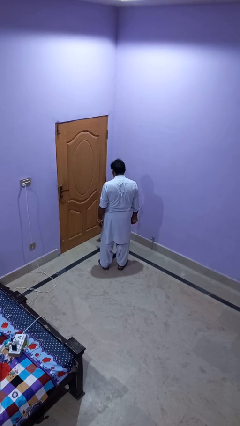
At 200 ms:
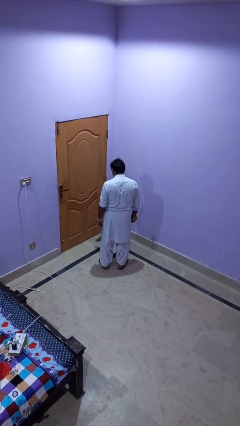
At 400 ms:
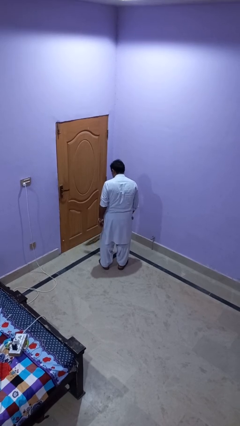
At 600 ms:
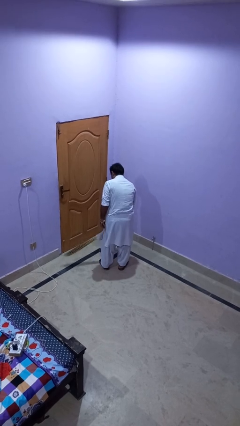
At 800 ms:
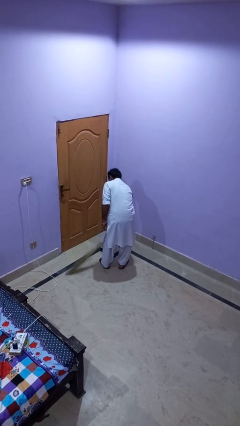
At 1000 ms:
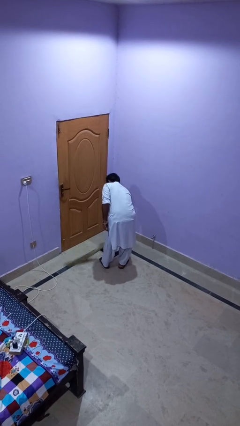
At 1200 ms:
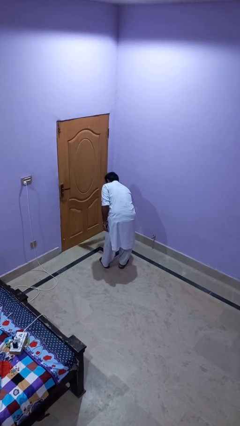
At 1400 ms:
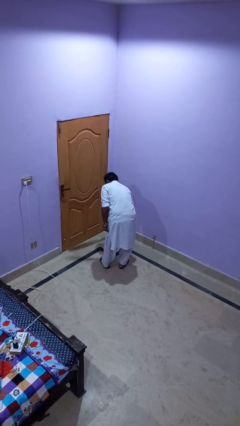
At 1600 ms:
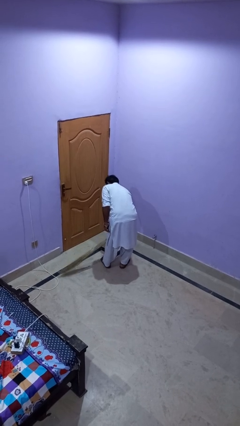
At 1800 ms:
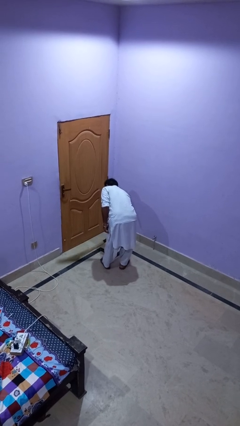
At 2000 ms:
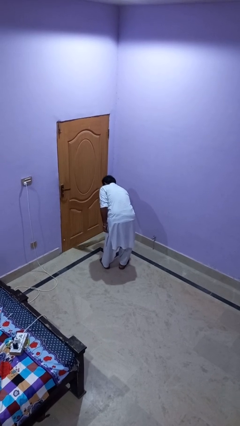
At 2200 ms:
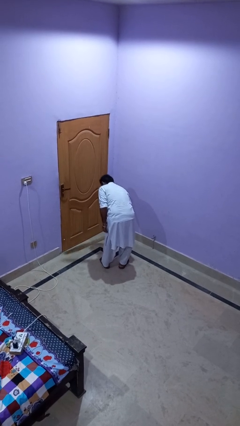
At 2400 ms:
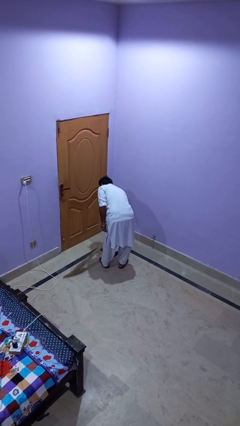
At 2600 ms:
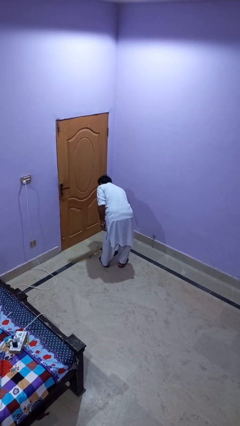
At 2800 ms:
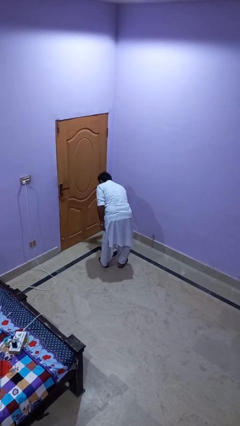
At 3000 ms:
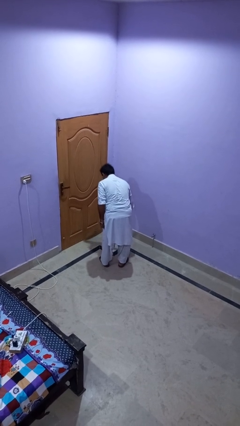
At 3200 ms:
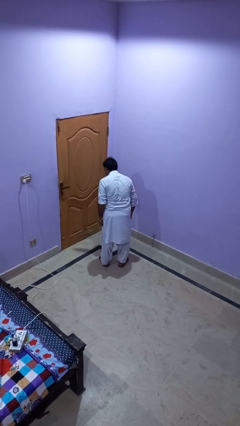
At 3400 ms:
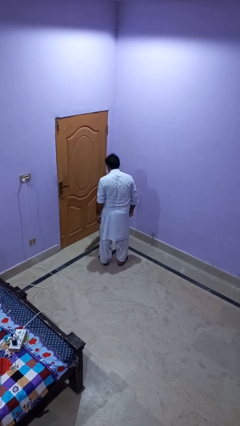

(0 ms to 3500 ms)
person sweeps floor

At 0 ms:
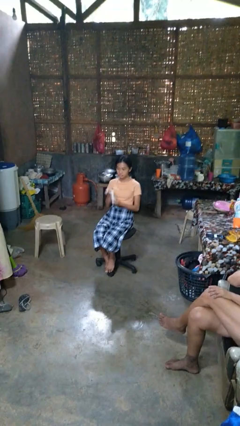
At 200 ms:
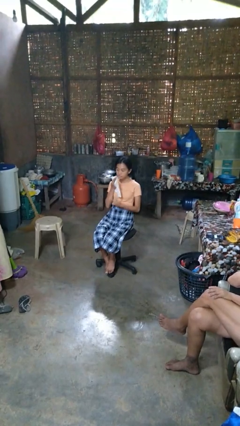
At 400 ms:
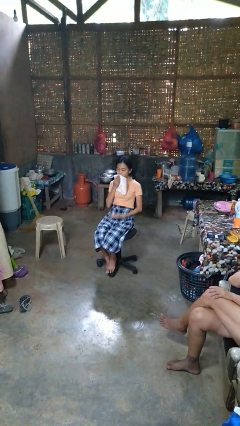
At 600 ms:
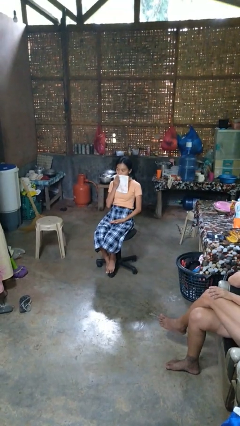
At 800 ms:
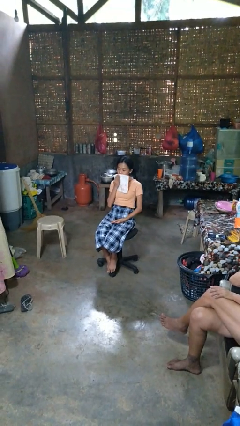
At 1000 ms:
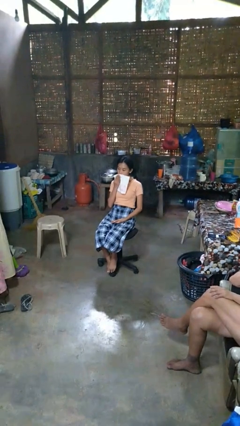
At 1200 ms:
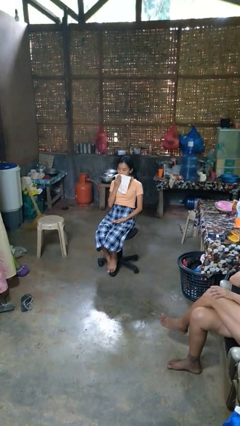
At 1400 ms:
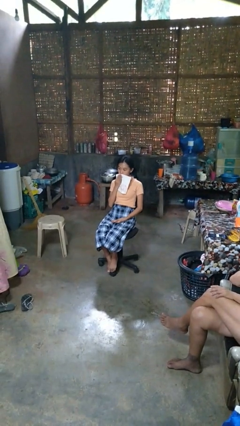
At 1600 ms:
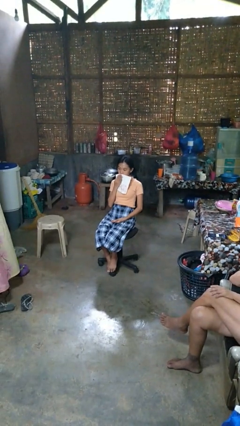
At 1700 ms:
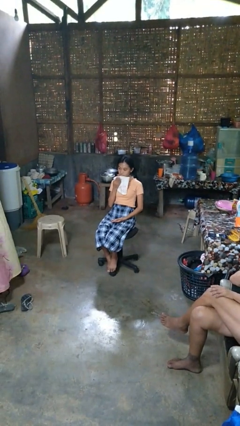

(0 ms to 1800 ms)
person wipes mouth with napkin

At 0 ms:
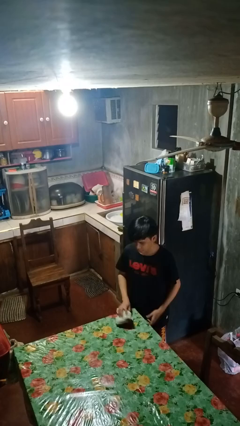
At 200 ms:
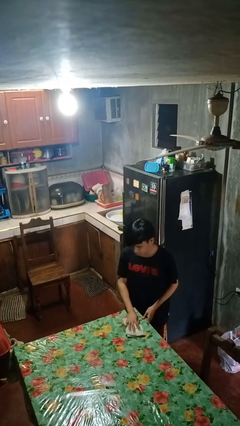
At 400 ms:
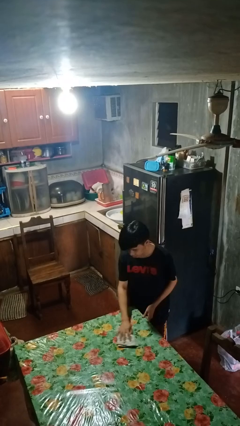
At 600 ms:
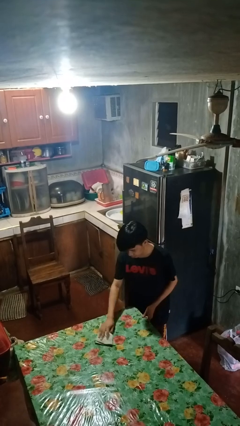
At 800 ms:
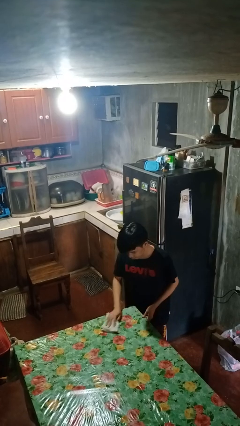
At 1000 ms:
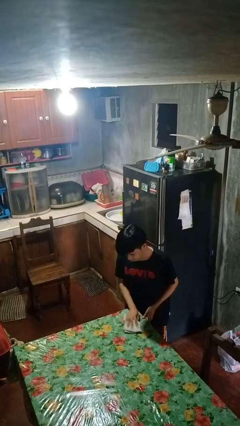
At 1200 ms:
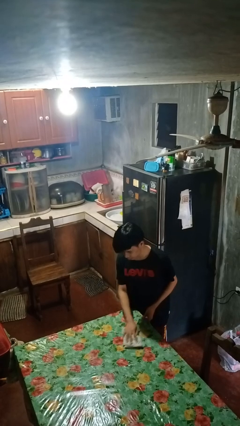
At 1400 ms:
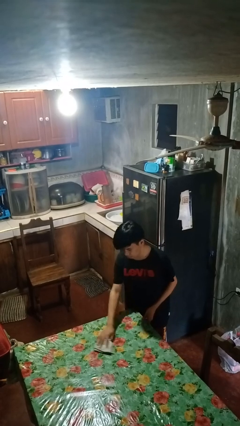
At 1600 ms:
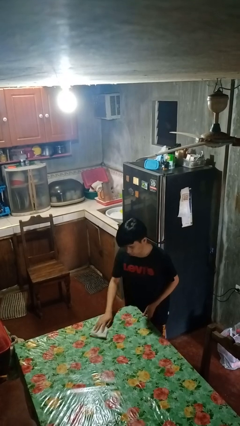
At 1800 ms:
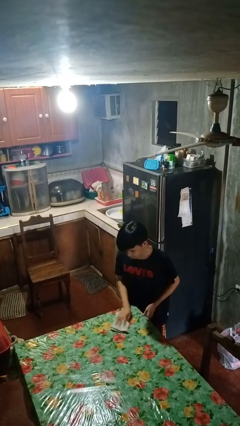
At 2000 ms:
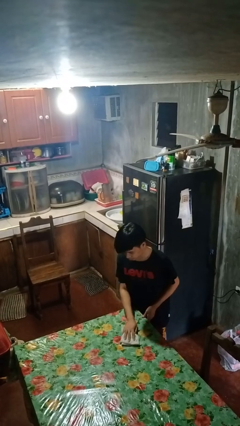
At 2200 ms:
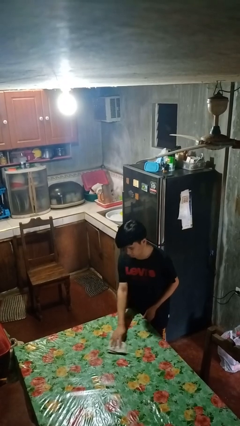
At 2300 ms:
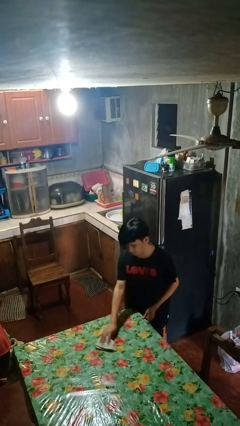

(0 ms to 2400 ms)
person cleans table with rag

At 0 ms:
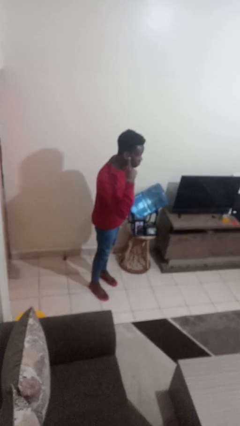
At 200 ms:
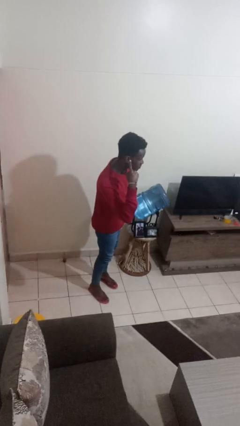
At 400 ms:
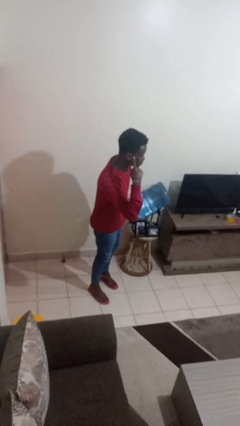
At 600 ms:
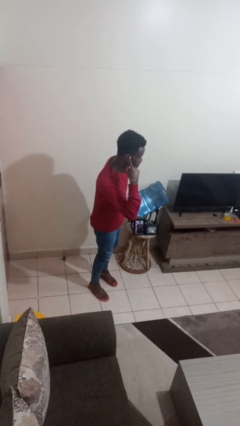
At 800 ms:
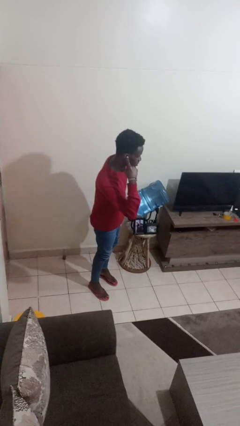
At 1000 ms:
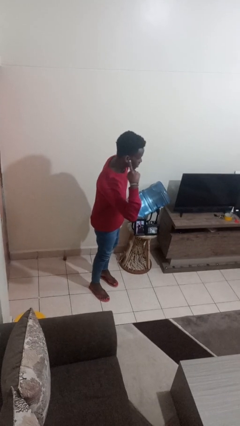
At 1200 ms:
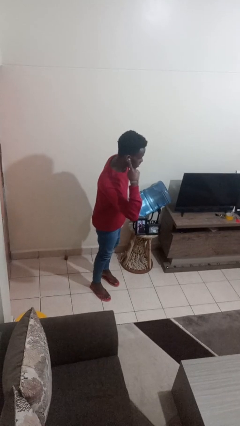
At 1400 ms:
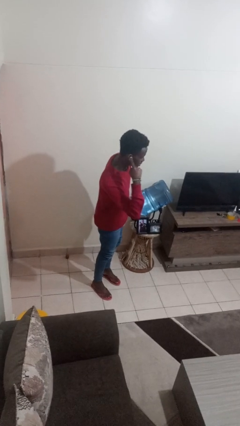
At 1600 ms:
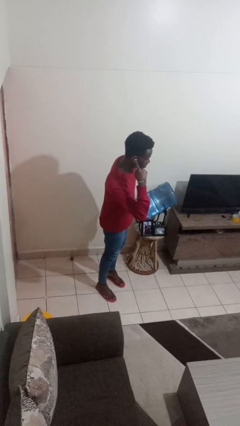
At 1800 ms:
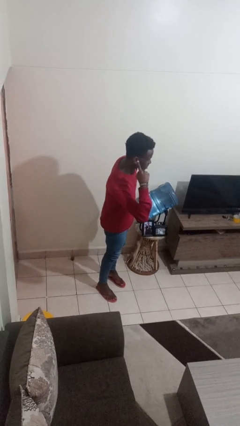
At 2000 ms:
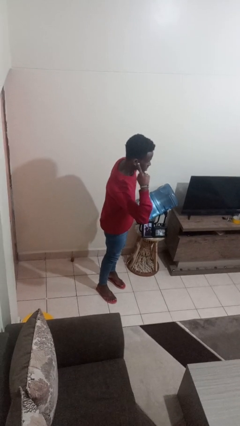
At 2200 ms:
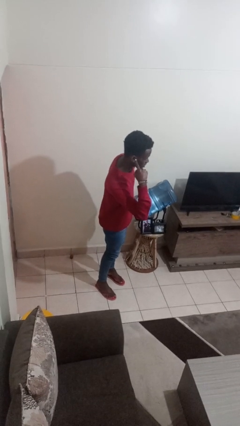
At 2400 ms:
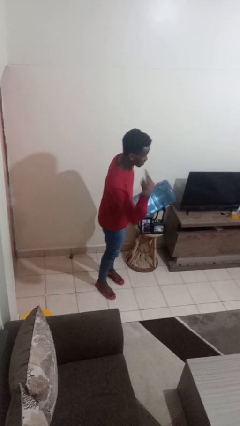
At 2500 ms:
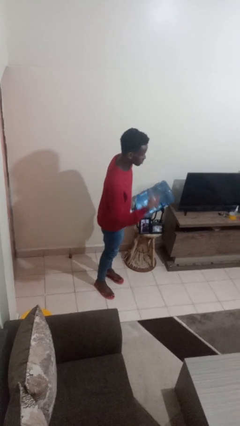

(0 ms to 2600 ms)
person gestures listen closely

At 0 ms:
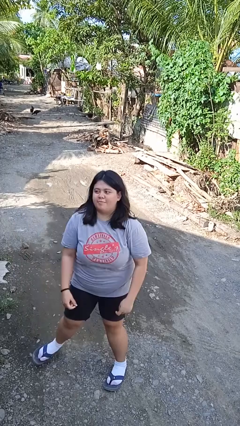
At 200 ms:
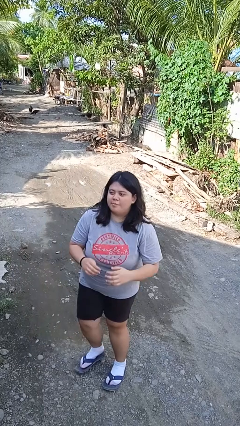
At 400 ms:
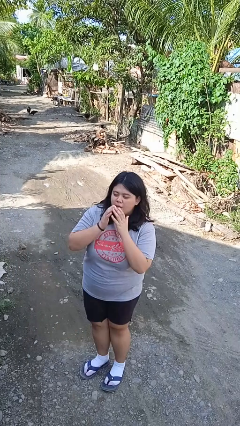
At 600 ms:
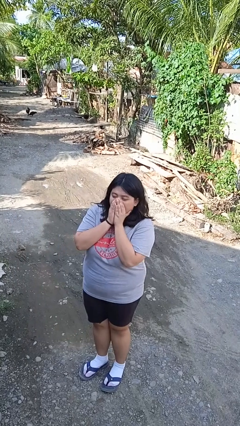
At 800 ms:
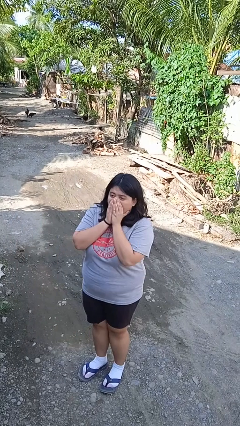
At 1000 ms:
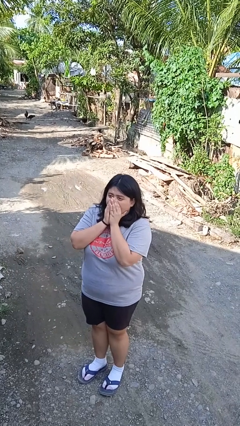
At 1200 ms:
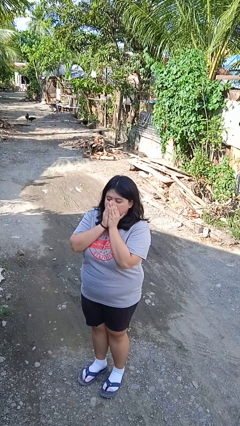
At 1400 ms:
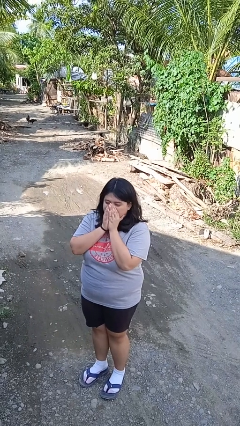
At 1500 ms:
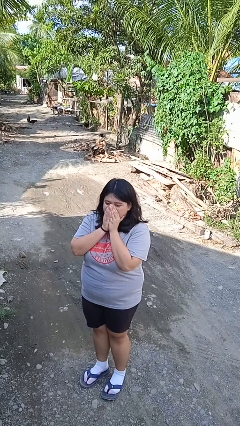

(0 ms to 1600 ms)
person blows into hands

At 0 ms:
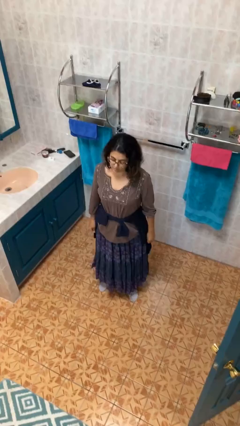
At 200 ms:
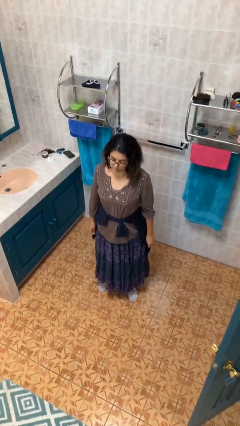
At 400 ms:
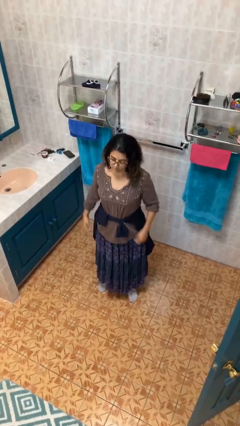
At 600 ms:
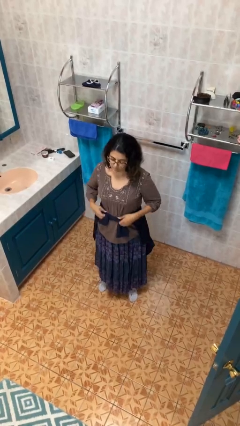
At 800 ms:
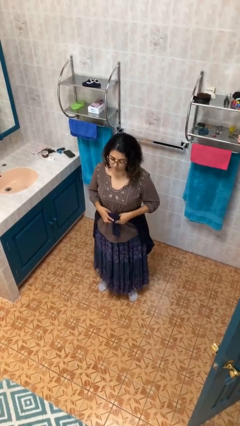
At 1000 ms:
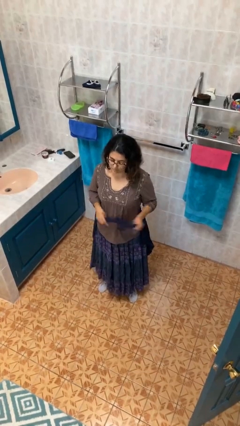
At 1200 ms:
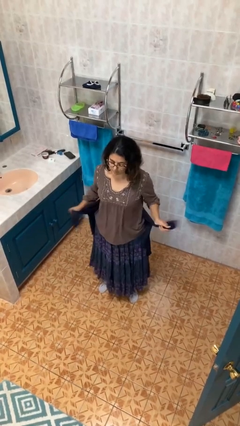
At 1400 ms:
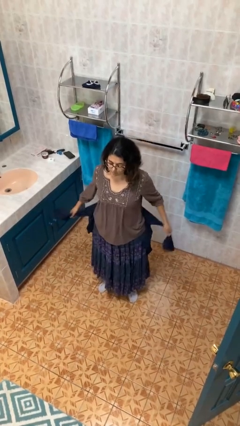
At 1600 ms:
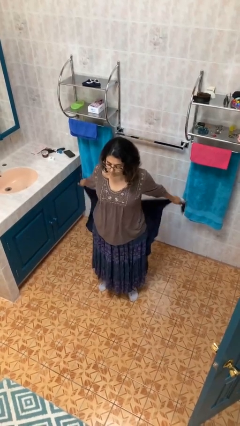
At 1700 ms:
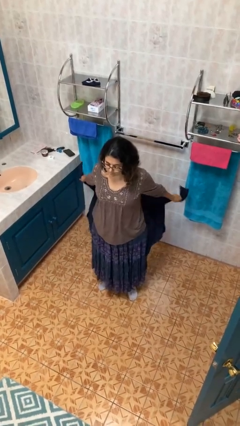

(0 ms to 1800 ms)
person unties jacket around waist

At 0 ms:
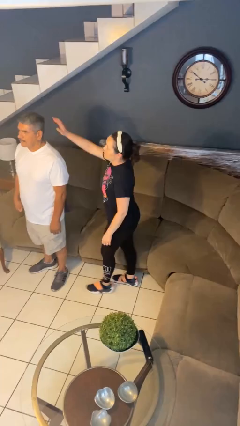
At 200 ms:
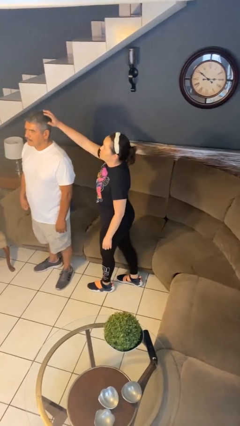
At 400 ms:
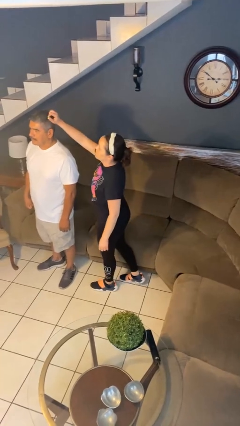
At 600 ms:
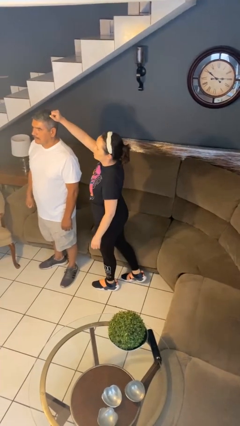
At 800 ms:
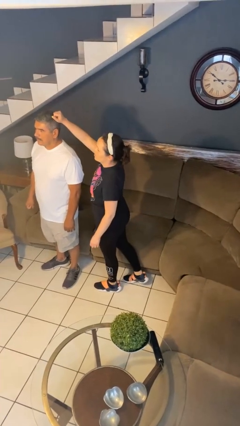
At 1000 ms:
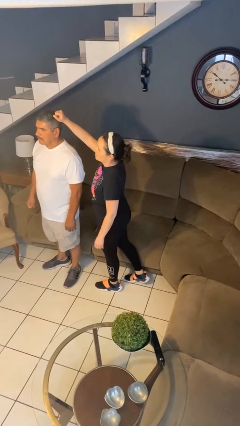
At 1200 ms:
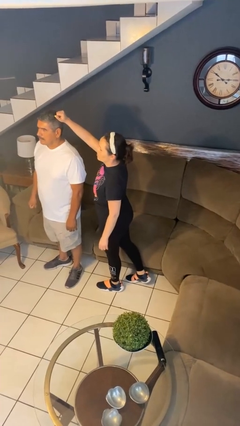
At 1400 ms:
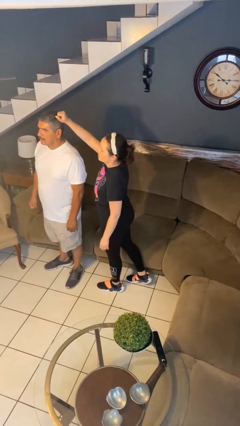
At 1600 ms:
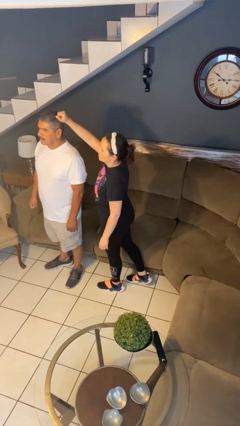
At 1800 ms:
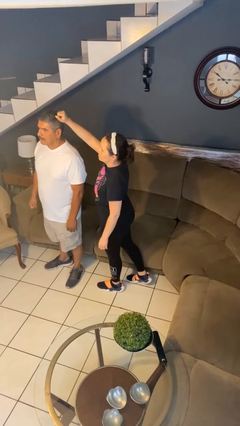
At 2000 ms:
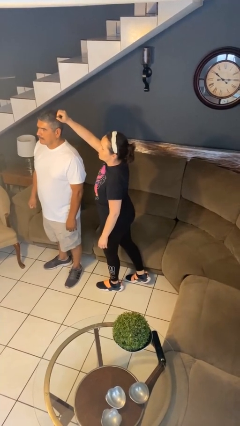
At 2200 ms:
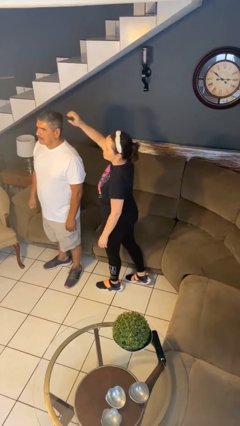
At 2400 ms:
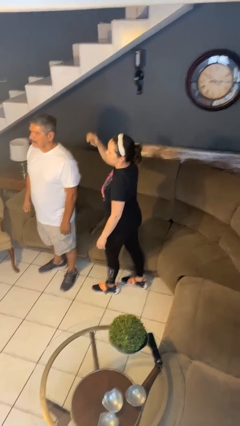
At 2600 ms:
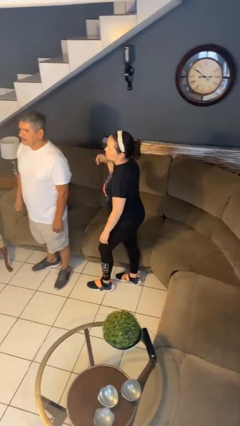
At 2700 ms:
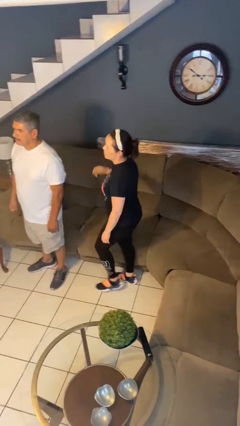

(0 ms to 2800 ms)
person grabs person by hair

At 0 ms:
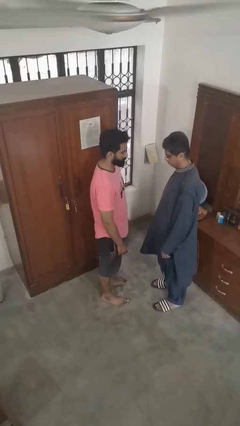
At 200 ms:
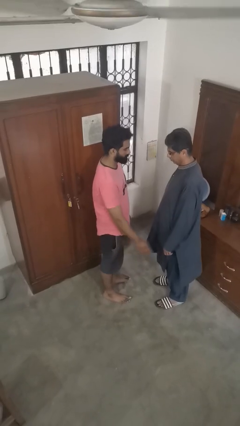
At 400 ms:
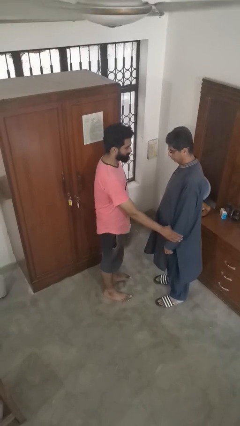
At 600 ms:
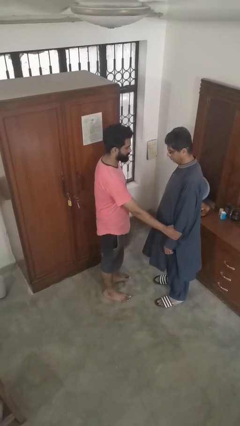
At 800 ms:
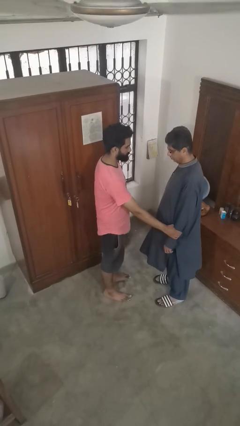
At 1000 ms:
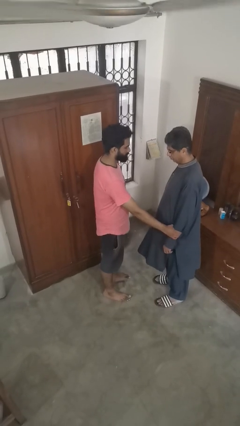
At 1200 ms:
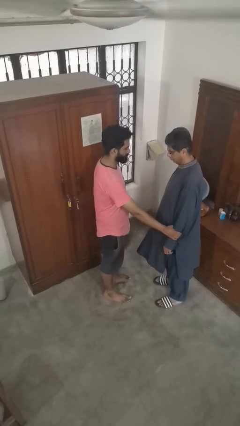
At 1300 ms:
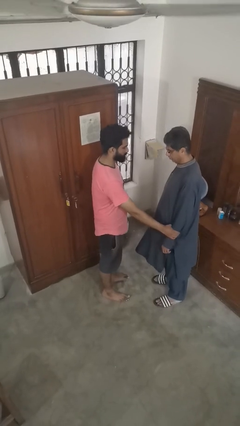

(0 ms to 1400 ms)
person grabs person by forearm
